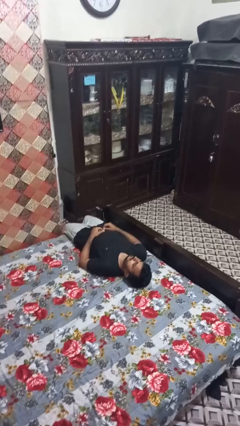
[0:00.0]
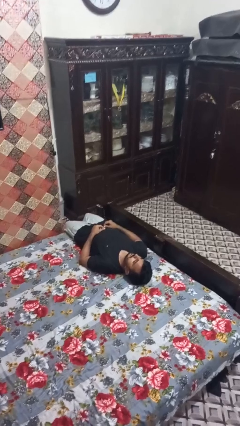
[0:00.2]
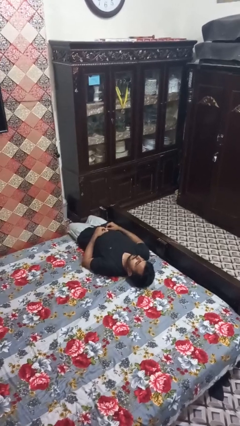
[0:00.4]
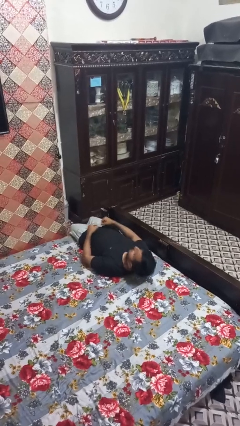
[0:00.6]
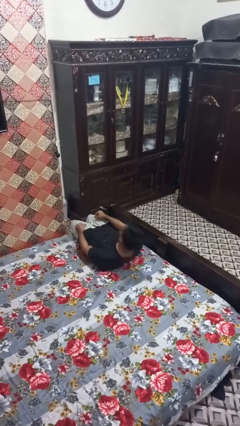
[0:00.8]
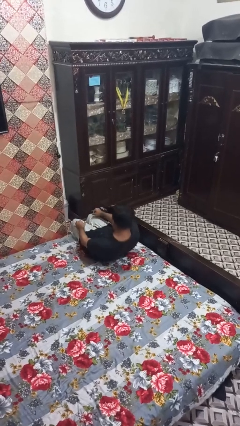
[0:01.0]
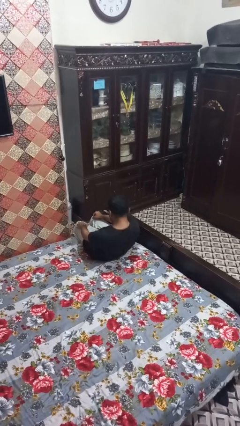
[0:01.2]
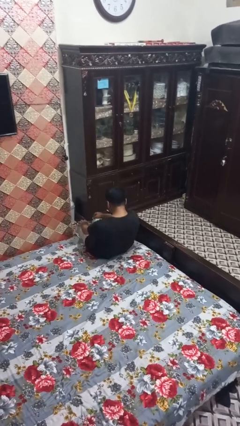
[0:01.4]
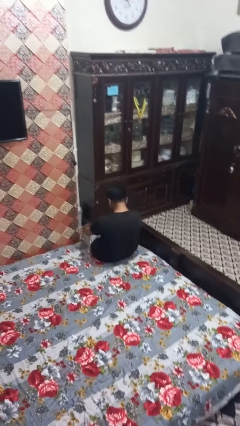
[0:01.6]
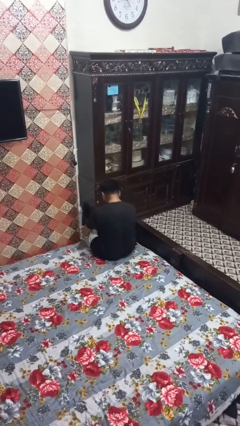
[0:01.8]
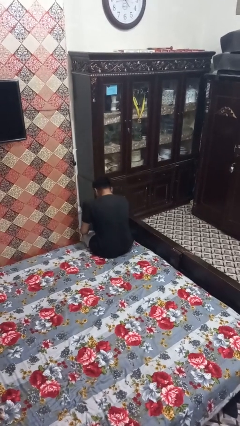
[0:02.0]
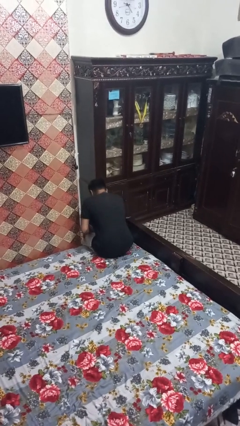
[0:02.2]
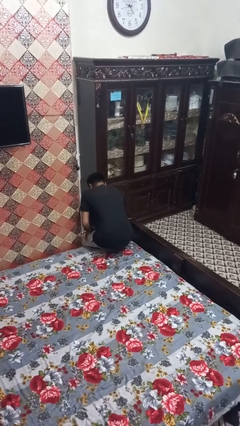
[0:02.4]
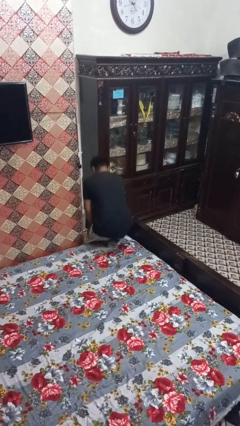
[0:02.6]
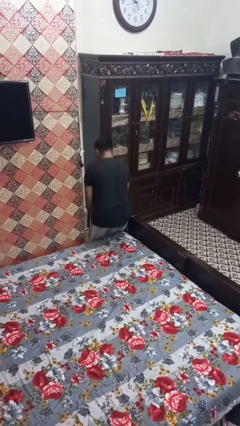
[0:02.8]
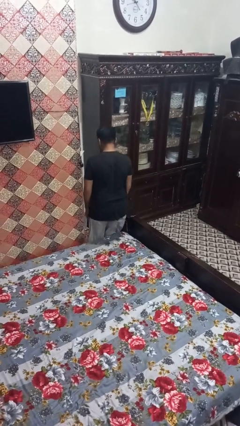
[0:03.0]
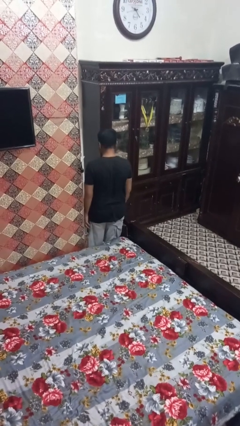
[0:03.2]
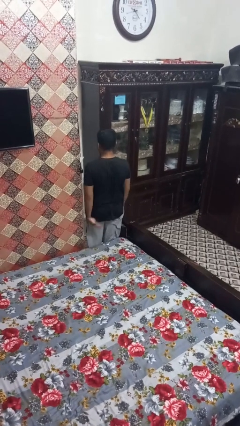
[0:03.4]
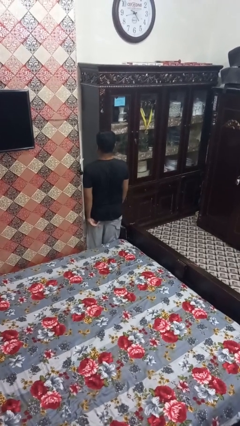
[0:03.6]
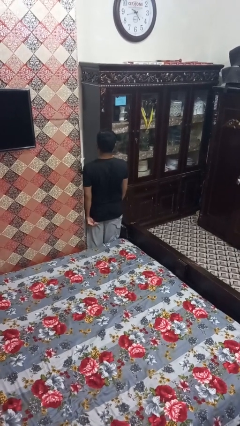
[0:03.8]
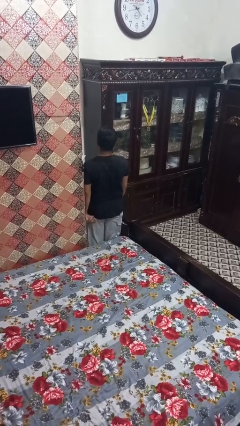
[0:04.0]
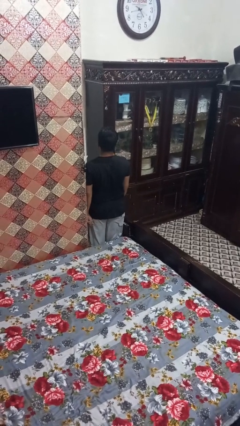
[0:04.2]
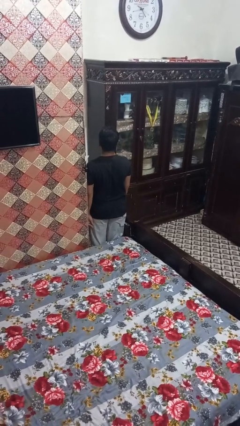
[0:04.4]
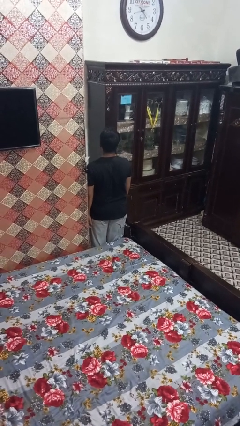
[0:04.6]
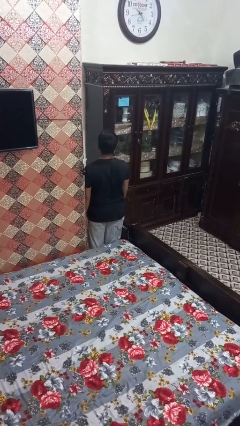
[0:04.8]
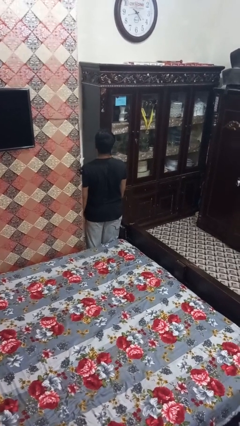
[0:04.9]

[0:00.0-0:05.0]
person stands up

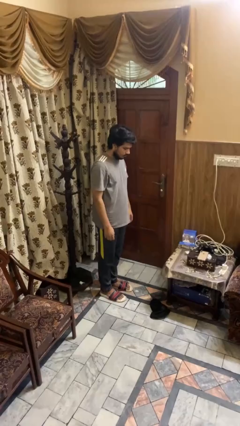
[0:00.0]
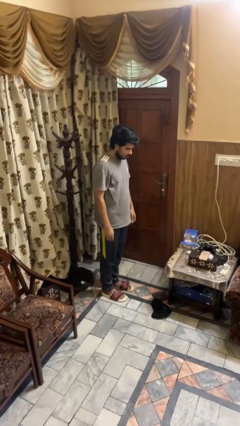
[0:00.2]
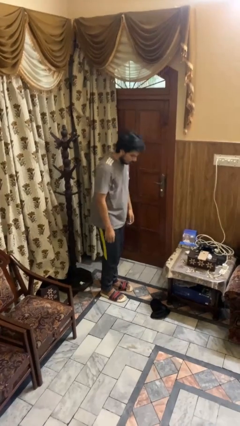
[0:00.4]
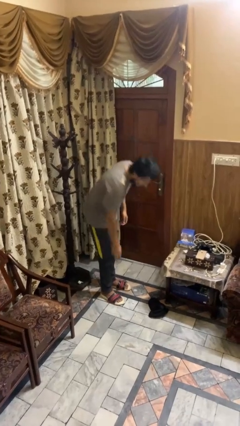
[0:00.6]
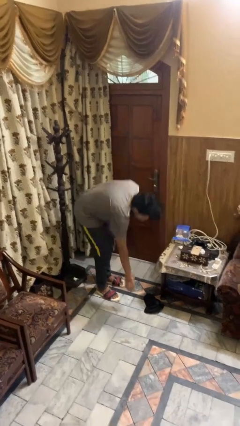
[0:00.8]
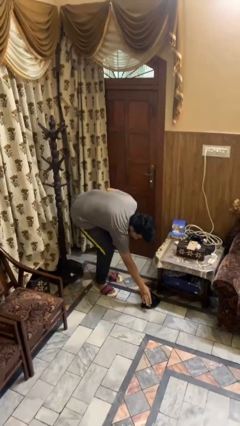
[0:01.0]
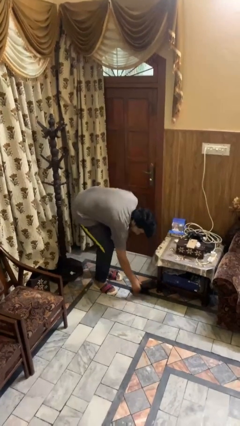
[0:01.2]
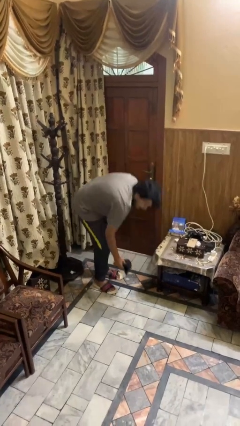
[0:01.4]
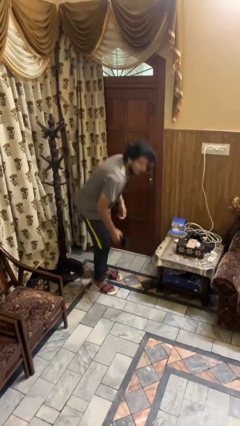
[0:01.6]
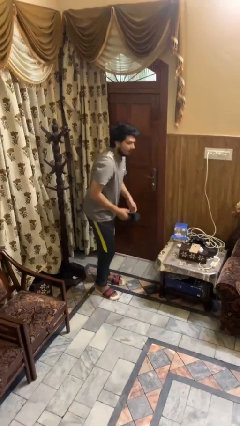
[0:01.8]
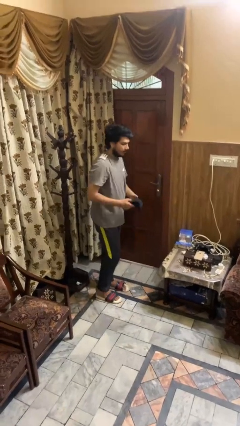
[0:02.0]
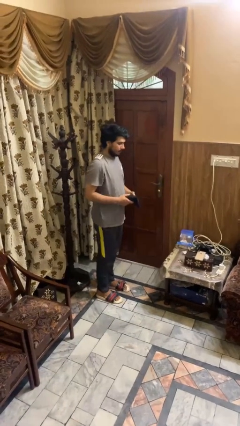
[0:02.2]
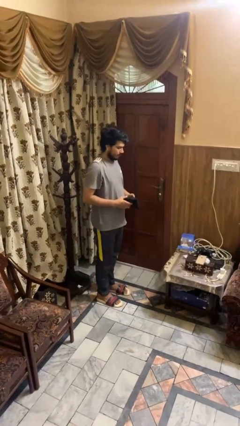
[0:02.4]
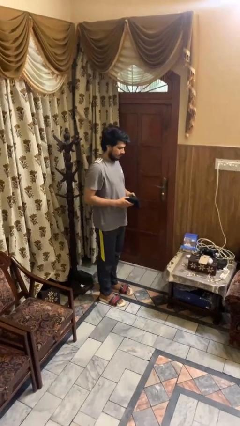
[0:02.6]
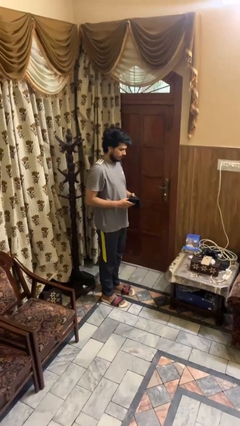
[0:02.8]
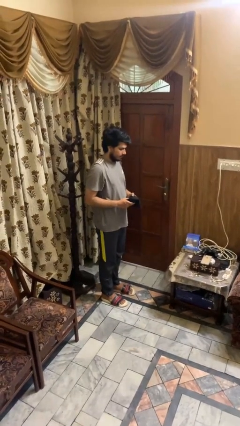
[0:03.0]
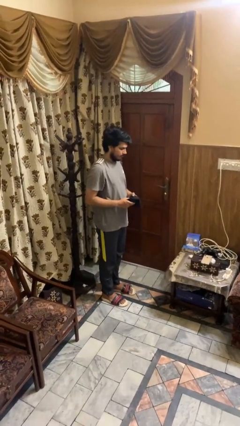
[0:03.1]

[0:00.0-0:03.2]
person picks up object from floor

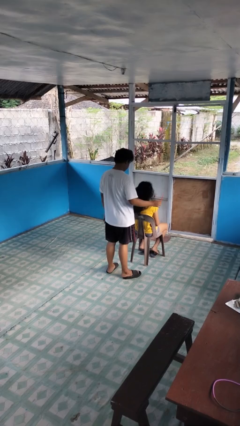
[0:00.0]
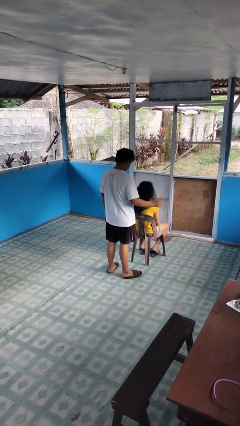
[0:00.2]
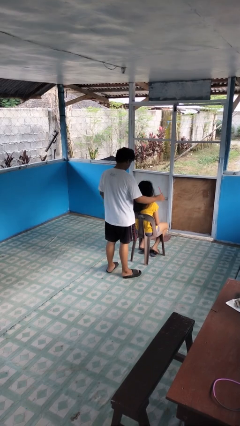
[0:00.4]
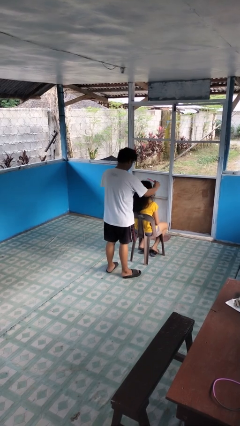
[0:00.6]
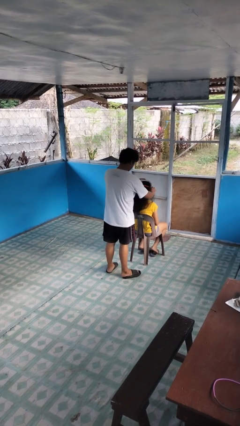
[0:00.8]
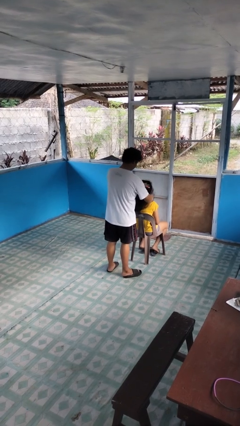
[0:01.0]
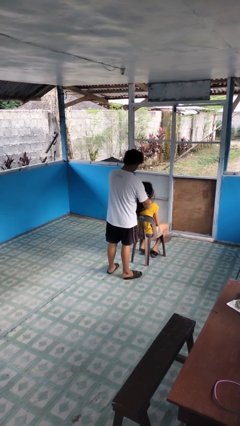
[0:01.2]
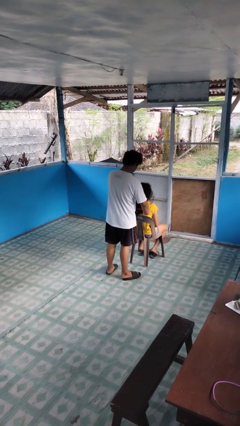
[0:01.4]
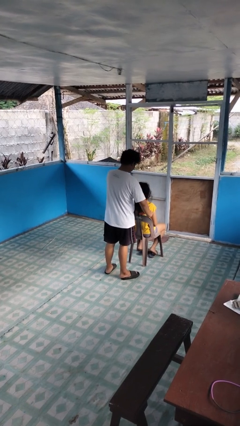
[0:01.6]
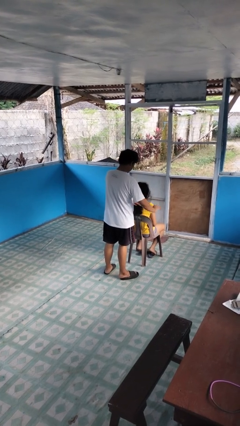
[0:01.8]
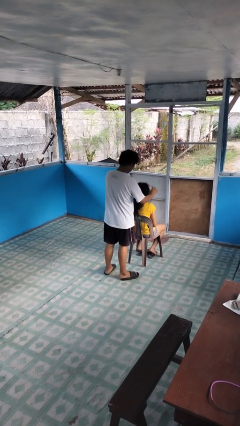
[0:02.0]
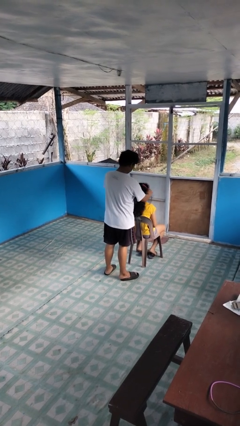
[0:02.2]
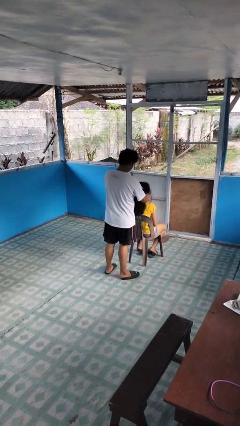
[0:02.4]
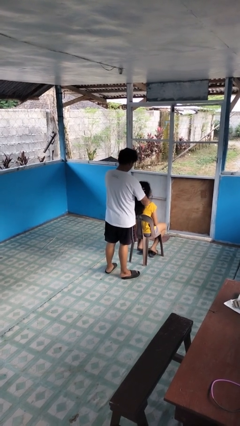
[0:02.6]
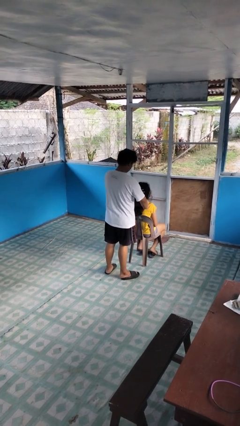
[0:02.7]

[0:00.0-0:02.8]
person brushes hair of person

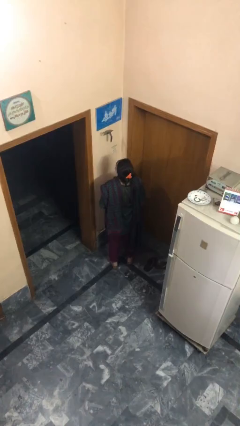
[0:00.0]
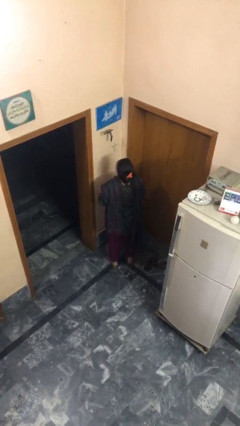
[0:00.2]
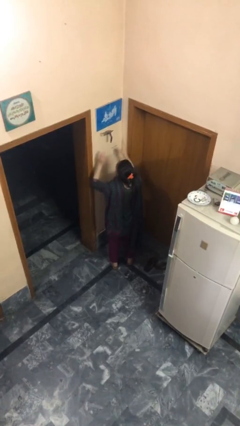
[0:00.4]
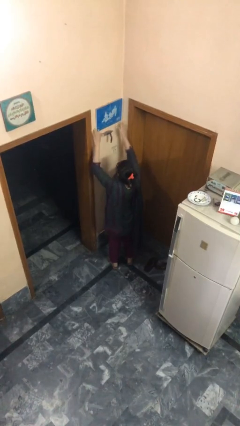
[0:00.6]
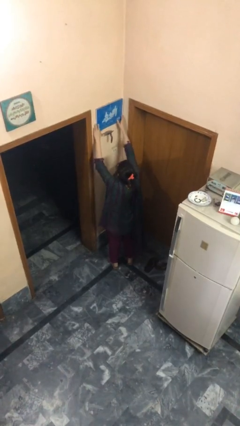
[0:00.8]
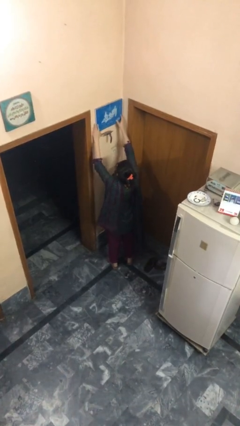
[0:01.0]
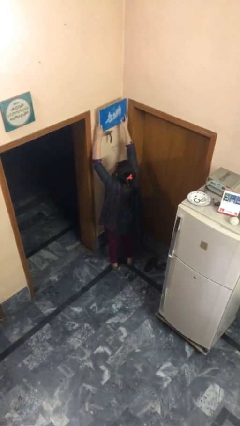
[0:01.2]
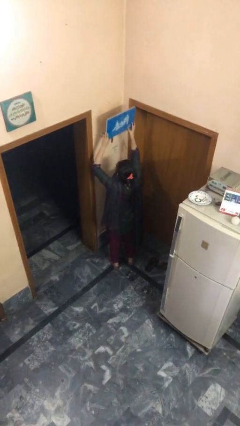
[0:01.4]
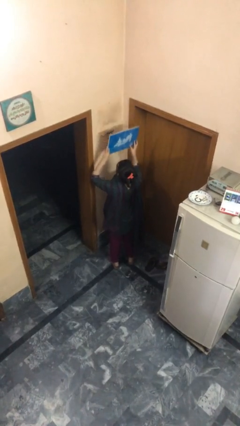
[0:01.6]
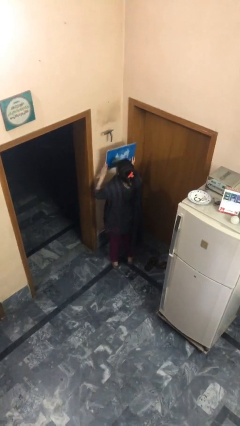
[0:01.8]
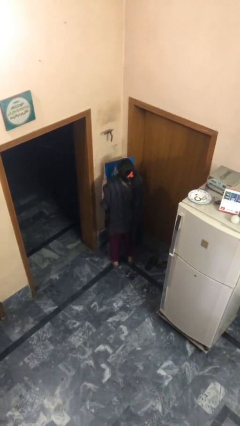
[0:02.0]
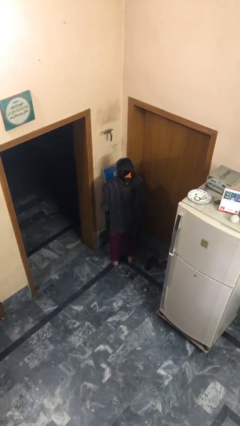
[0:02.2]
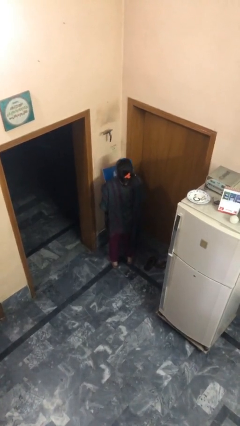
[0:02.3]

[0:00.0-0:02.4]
person takes down picture frame

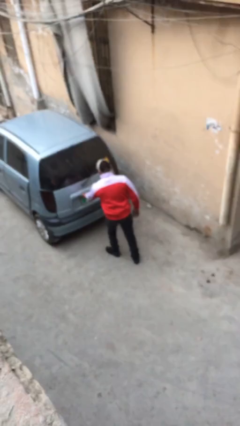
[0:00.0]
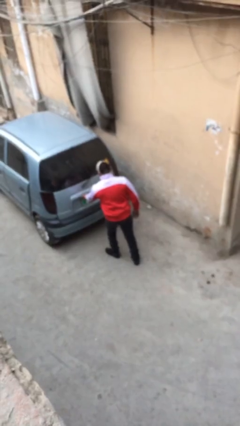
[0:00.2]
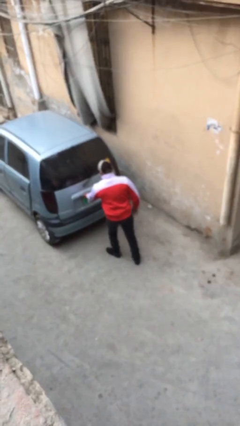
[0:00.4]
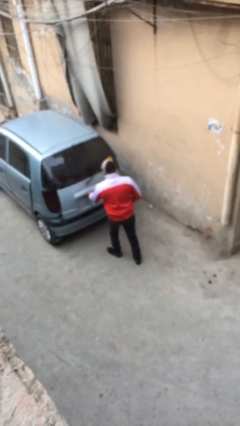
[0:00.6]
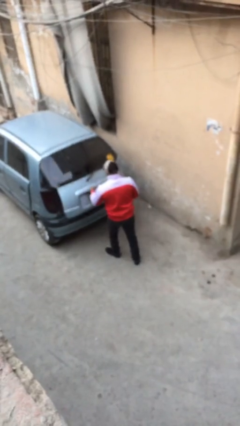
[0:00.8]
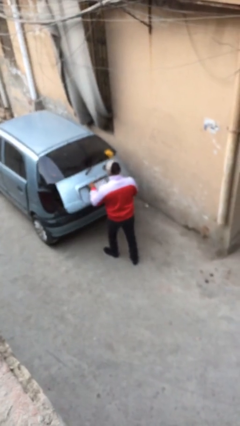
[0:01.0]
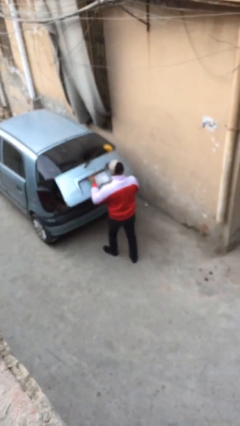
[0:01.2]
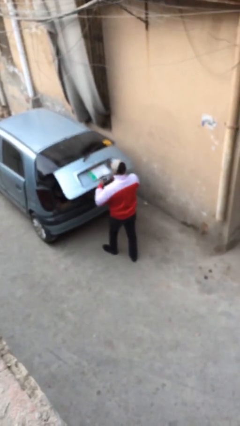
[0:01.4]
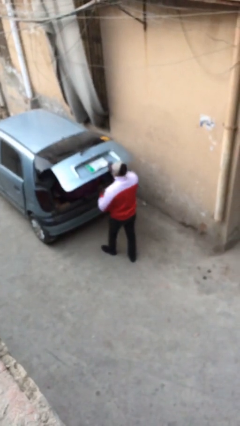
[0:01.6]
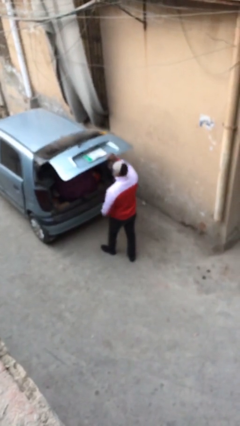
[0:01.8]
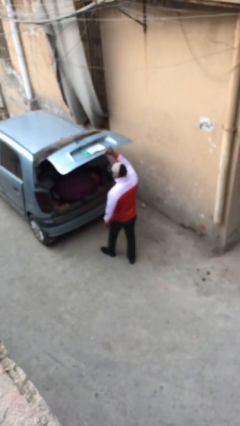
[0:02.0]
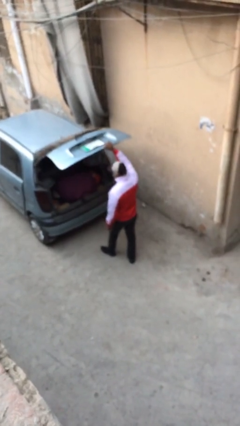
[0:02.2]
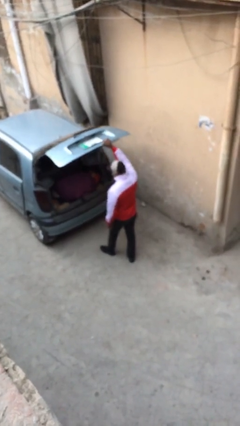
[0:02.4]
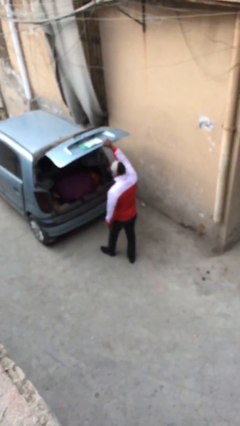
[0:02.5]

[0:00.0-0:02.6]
person opens car trunk

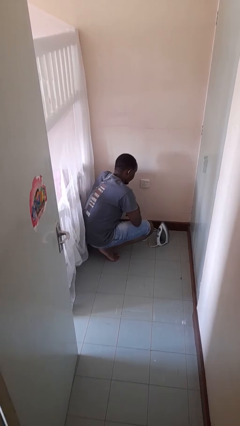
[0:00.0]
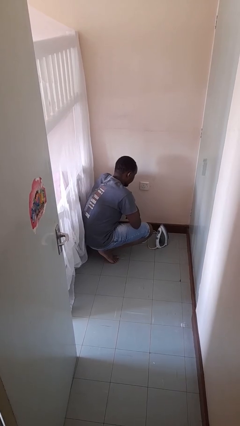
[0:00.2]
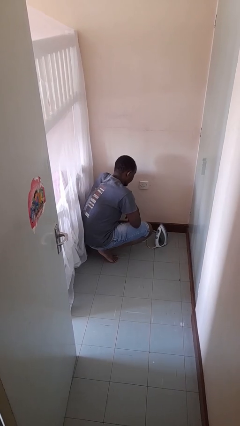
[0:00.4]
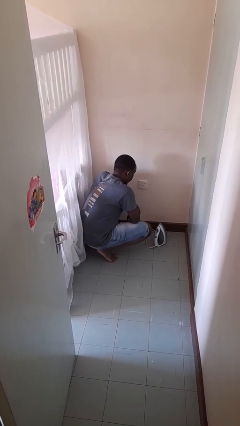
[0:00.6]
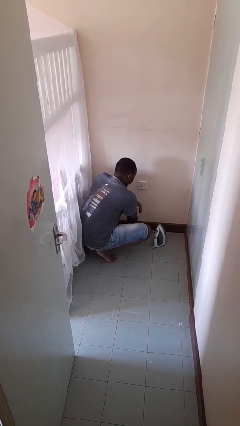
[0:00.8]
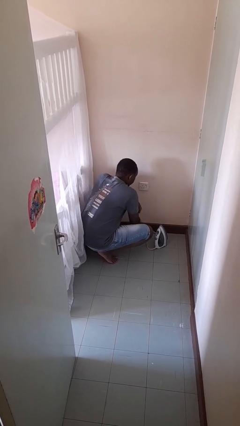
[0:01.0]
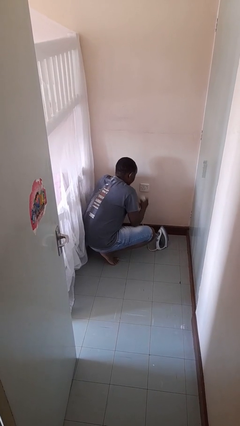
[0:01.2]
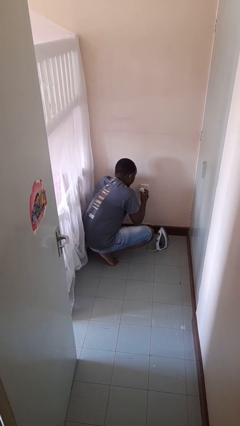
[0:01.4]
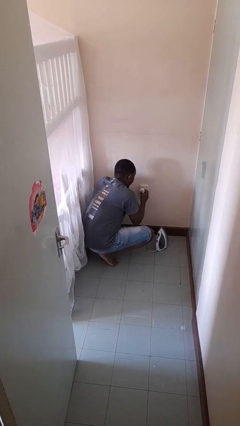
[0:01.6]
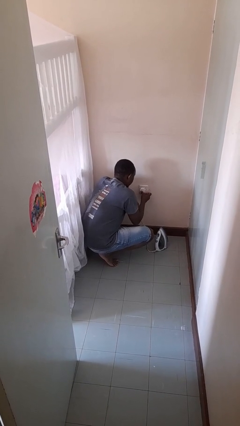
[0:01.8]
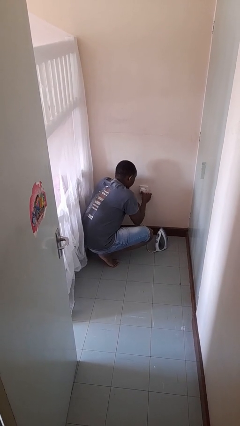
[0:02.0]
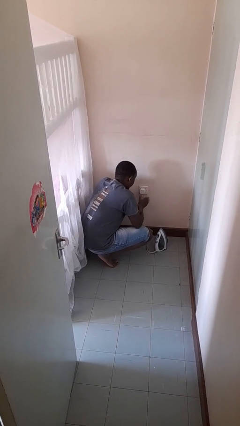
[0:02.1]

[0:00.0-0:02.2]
person plugs into electrical socket
